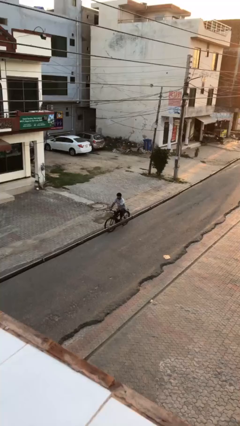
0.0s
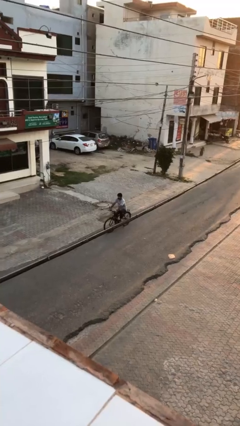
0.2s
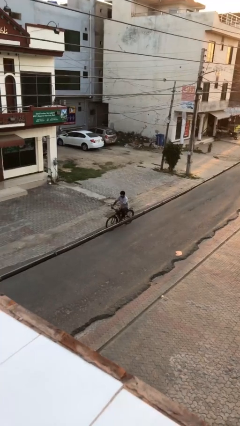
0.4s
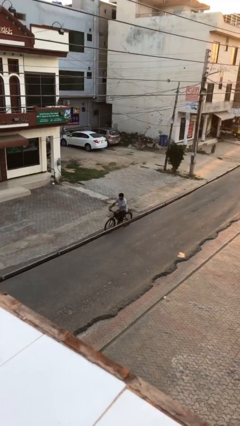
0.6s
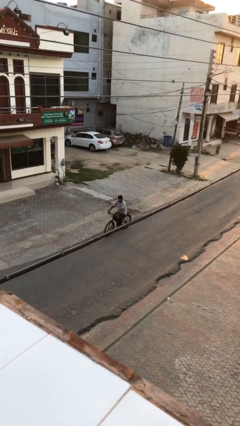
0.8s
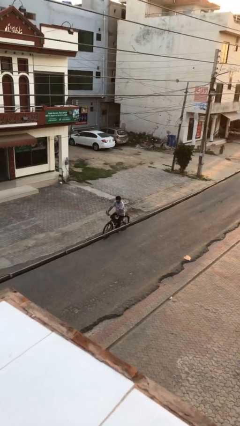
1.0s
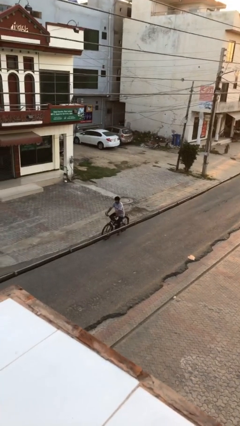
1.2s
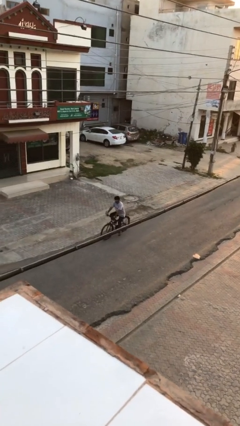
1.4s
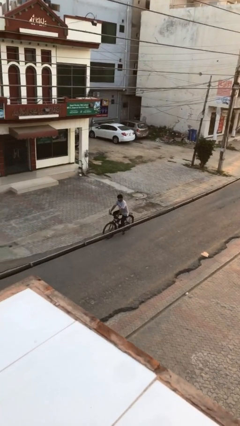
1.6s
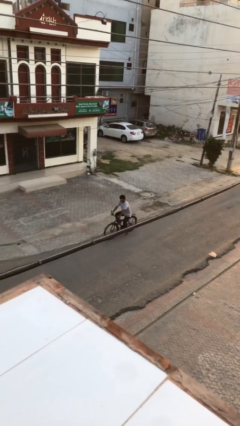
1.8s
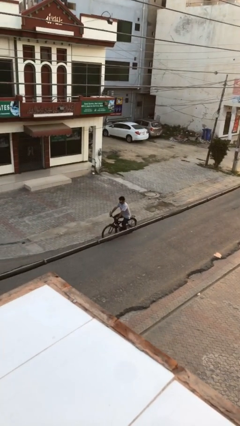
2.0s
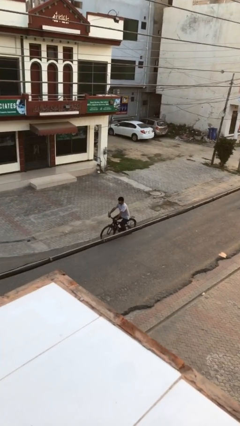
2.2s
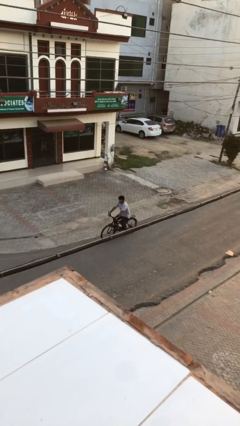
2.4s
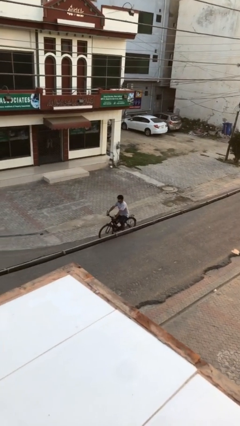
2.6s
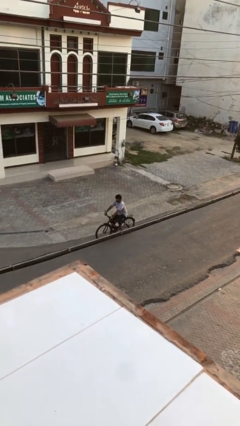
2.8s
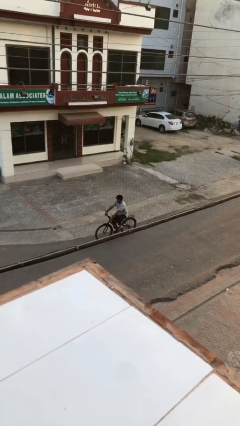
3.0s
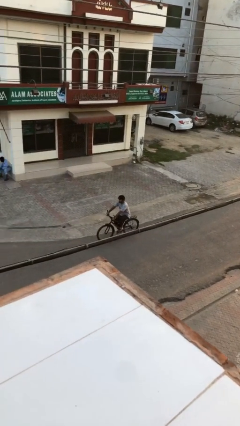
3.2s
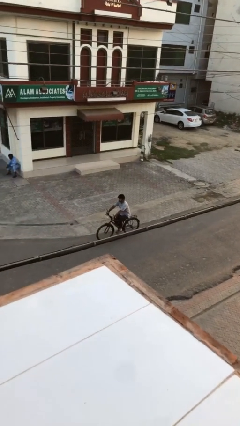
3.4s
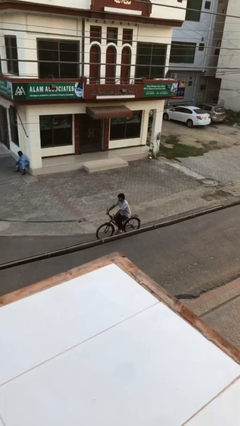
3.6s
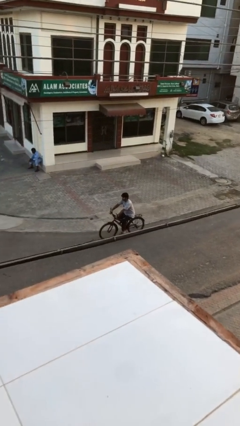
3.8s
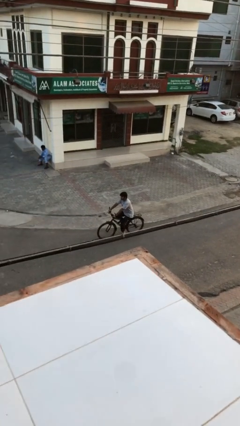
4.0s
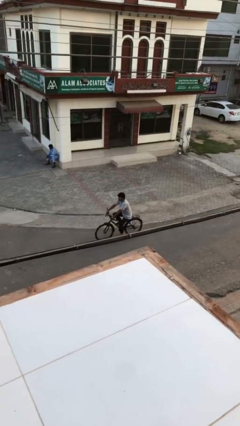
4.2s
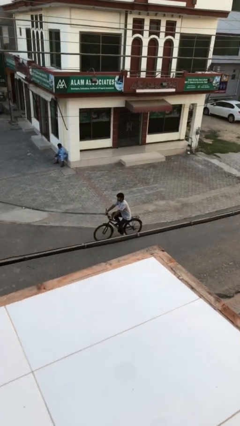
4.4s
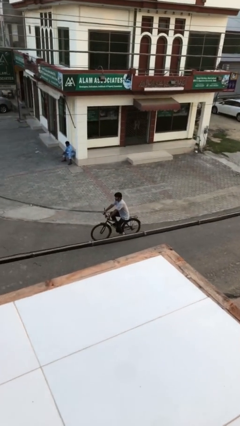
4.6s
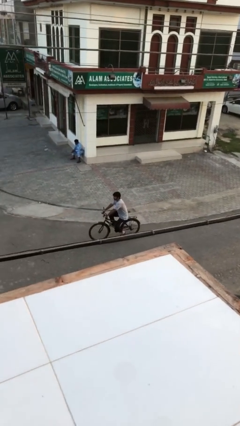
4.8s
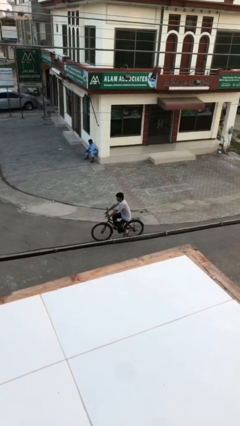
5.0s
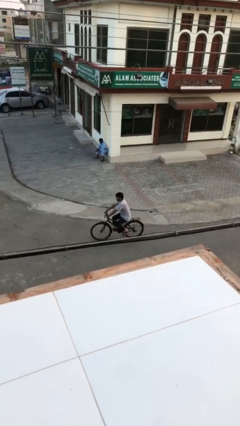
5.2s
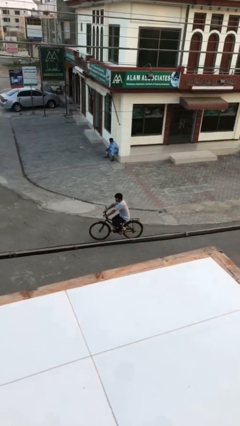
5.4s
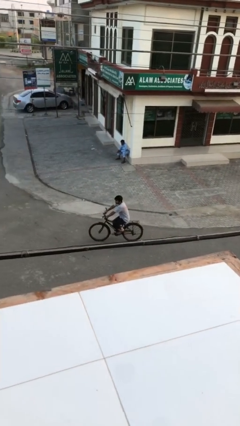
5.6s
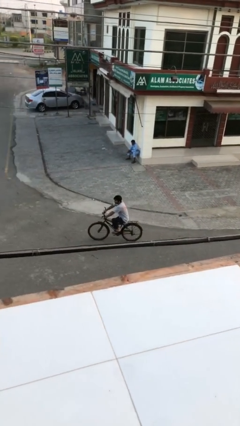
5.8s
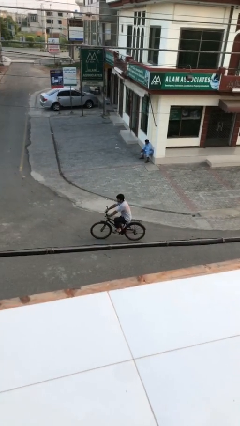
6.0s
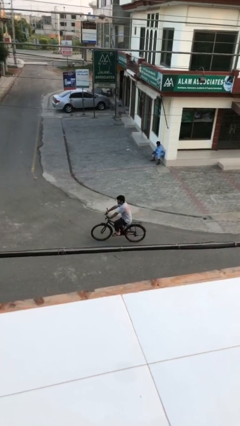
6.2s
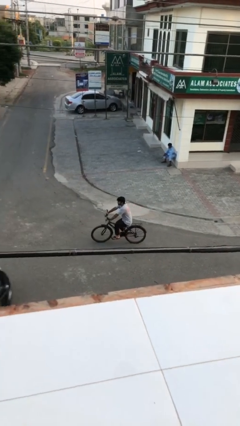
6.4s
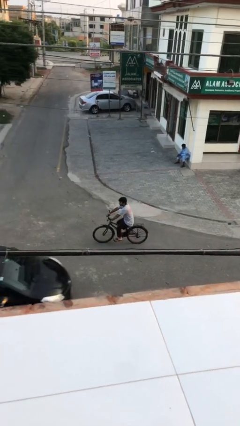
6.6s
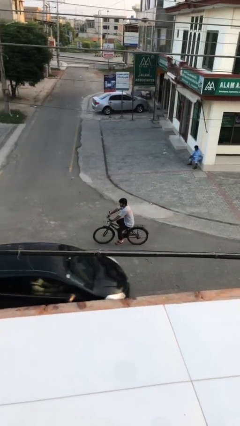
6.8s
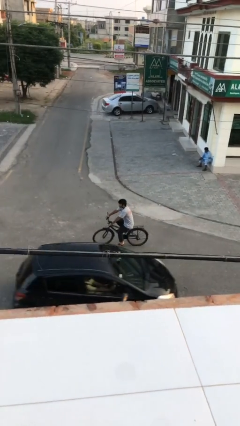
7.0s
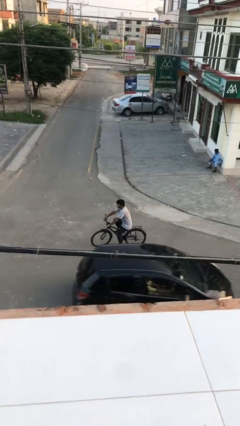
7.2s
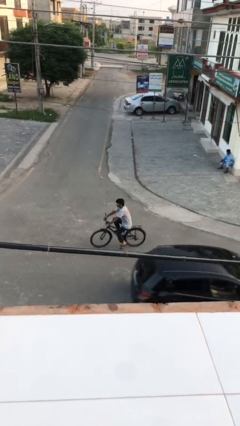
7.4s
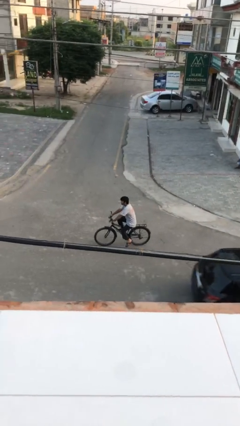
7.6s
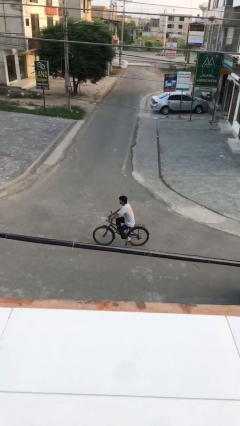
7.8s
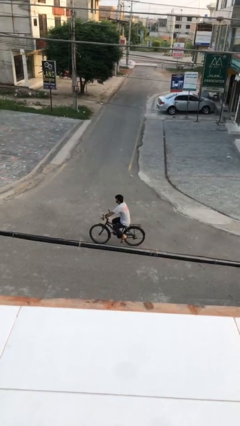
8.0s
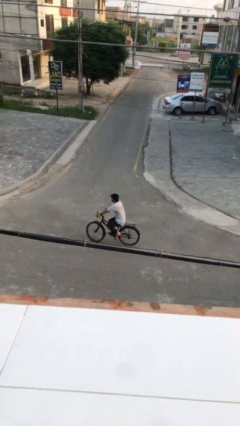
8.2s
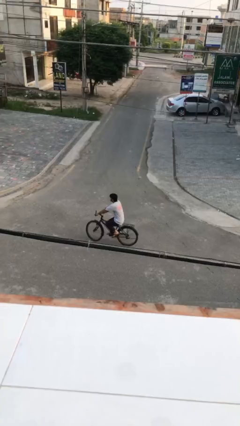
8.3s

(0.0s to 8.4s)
person rides bicycle

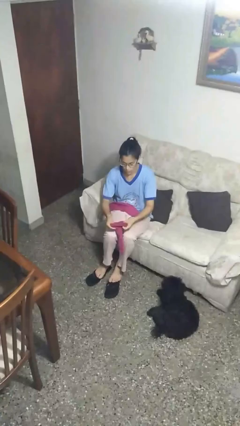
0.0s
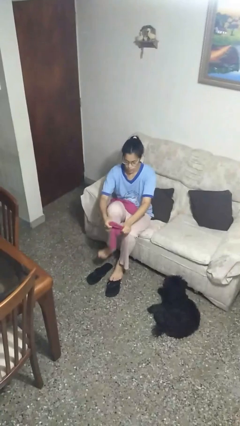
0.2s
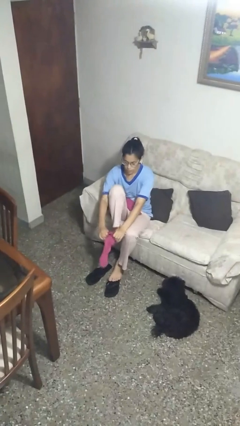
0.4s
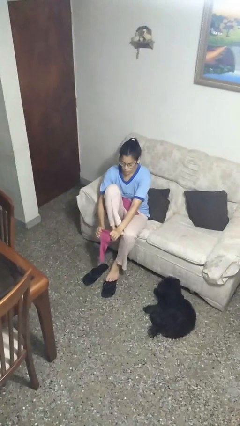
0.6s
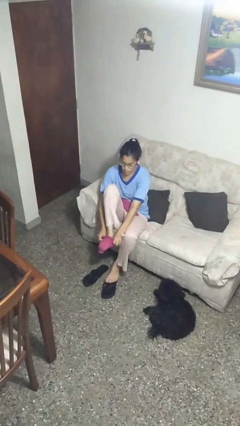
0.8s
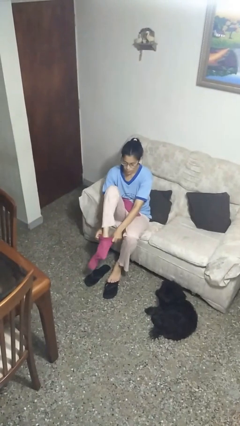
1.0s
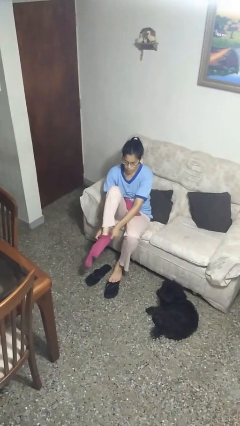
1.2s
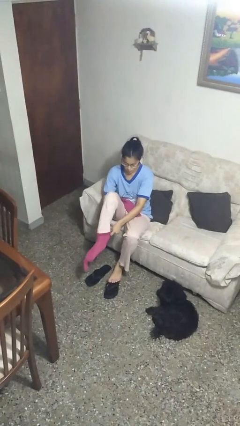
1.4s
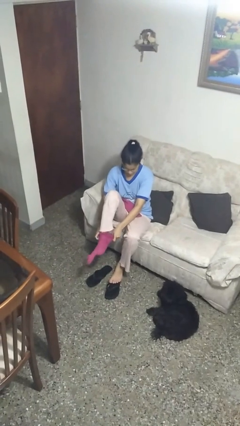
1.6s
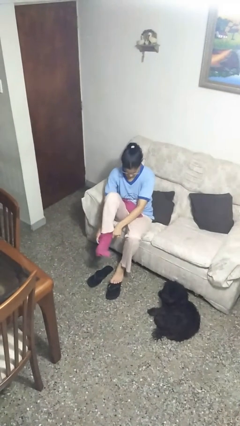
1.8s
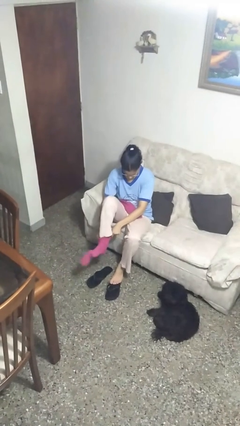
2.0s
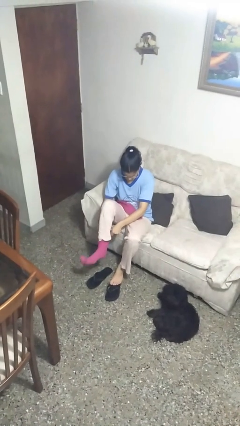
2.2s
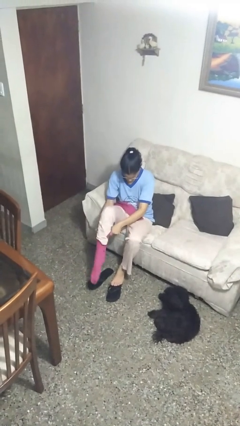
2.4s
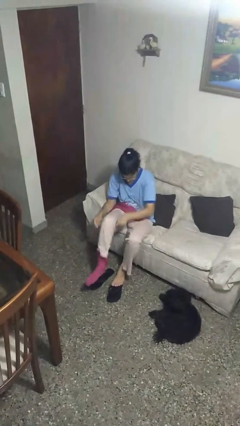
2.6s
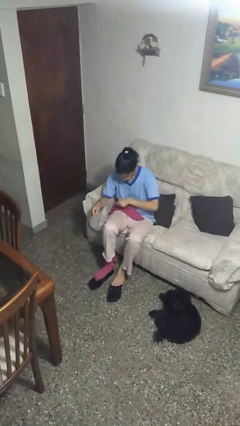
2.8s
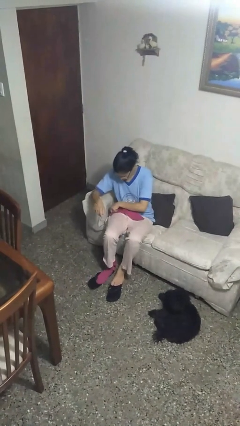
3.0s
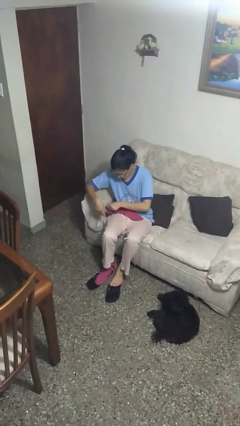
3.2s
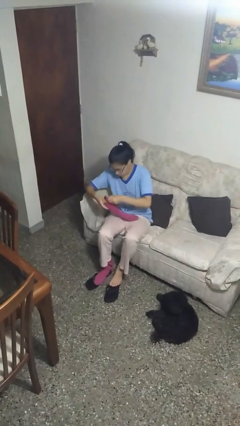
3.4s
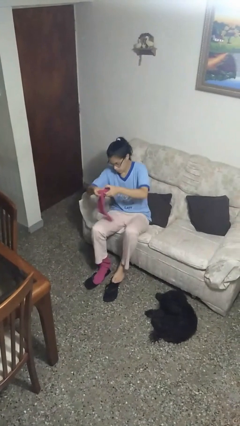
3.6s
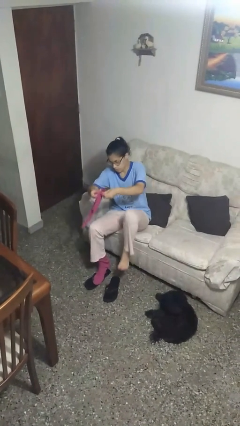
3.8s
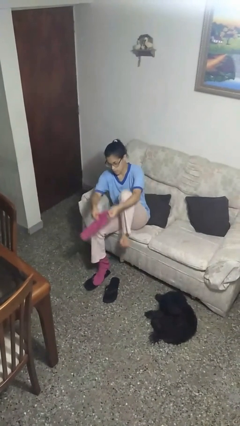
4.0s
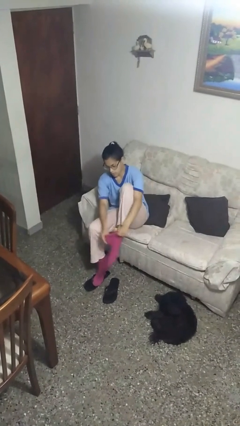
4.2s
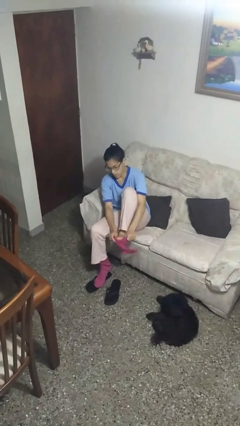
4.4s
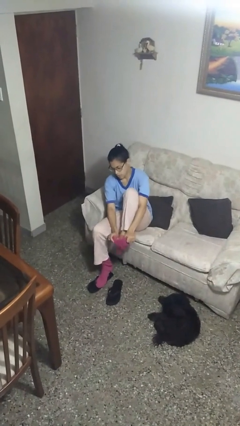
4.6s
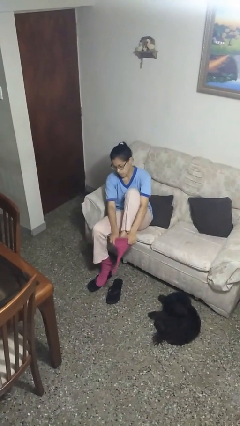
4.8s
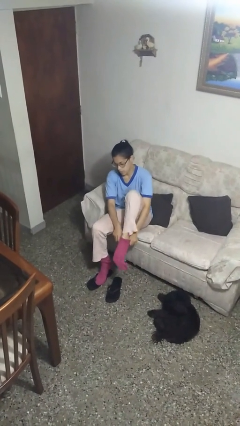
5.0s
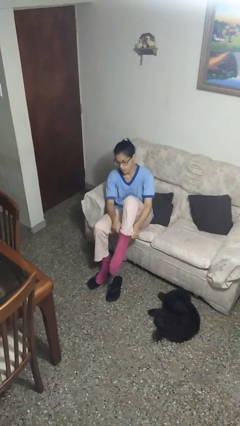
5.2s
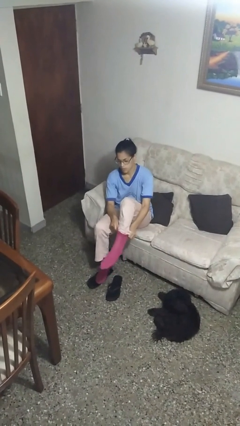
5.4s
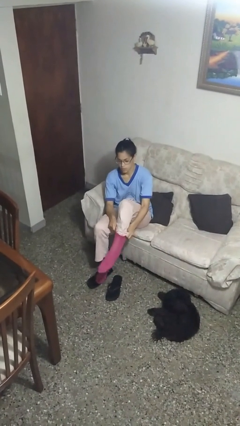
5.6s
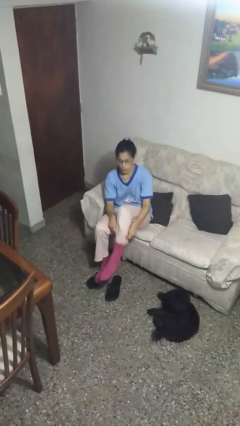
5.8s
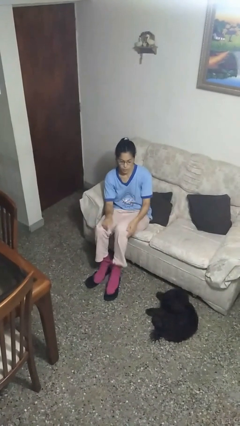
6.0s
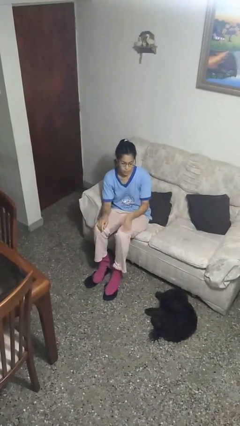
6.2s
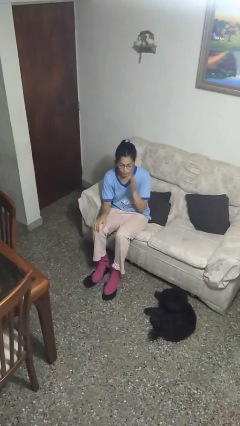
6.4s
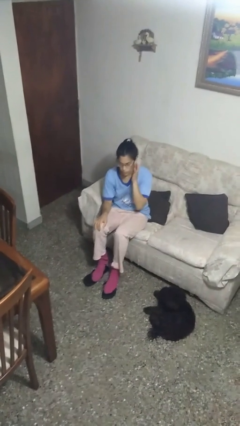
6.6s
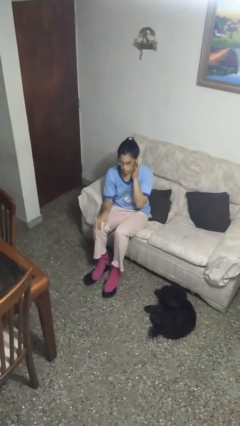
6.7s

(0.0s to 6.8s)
person puts on socks

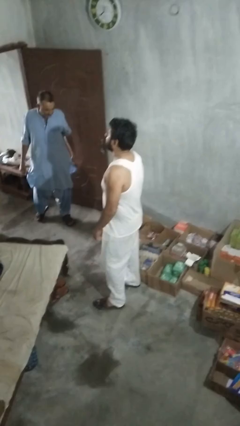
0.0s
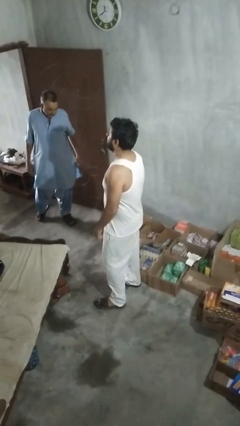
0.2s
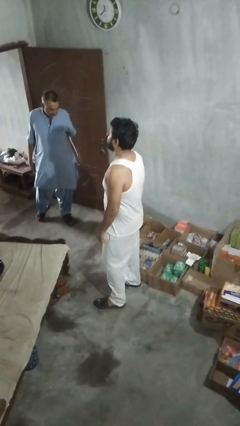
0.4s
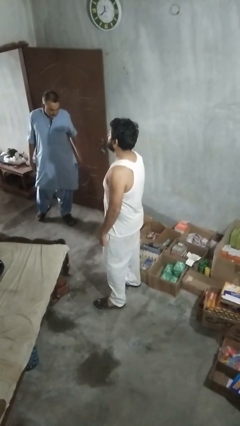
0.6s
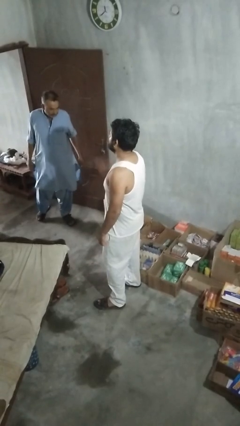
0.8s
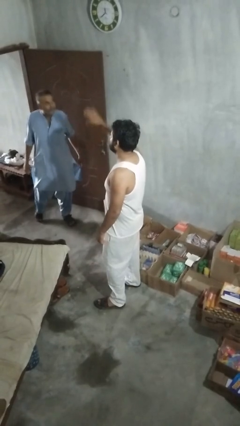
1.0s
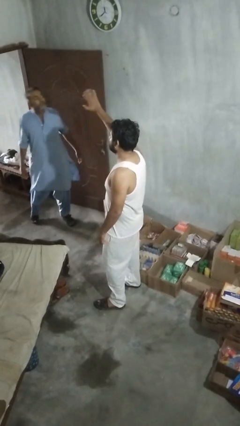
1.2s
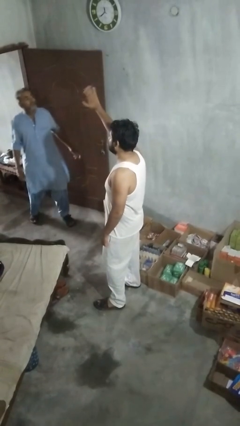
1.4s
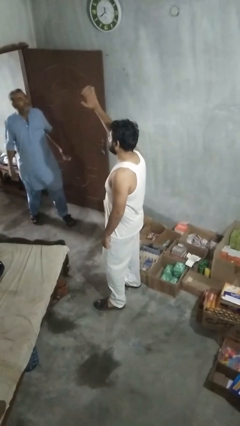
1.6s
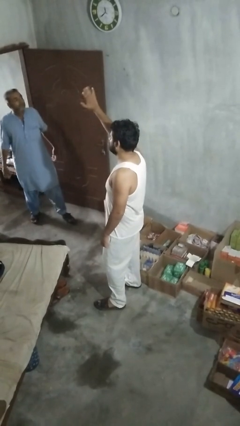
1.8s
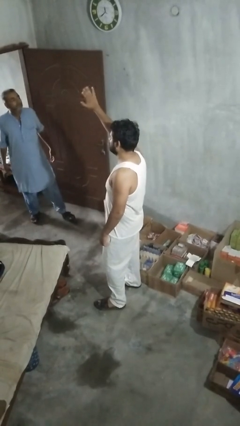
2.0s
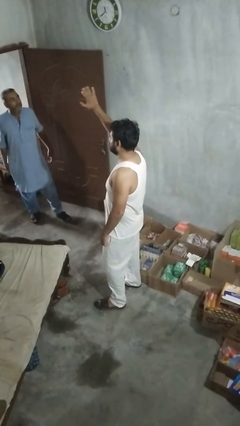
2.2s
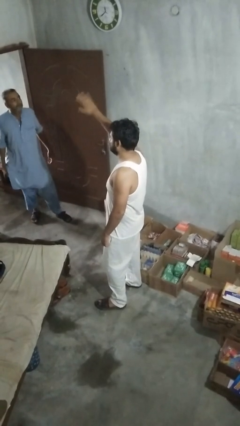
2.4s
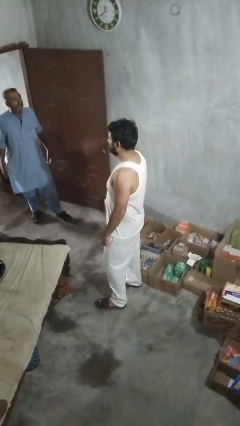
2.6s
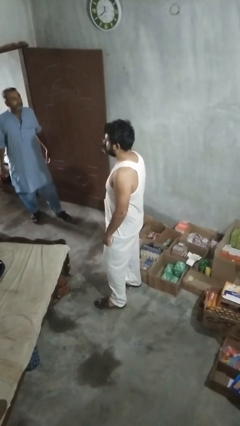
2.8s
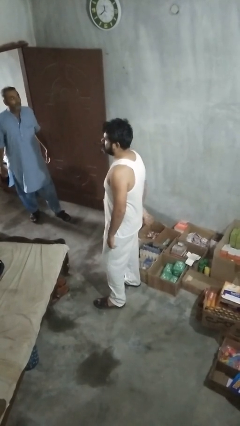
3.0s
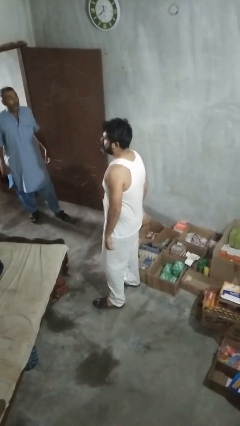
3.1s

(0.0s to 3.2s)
person waves at person
